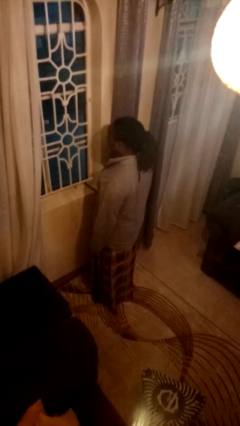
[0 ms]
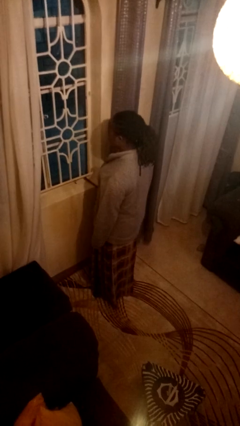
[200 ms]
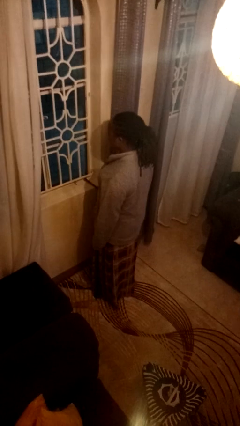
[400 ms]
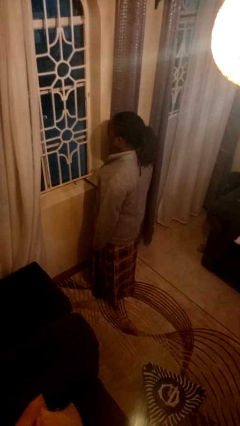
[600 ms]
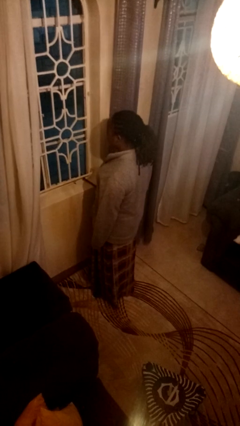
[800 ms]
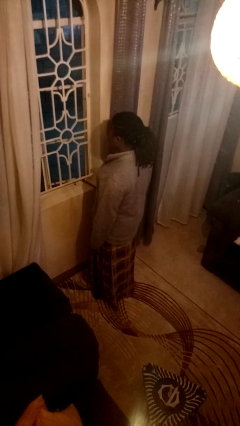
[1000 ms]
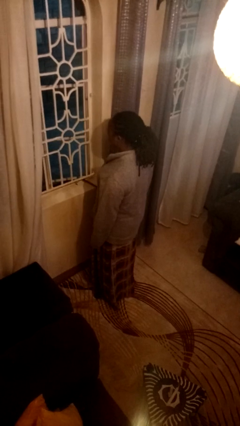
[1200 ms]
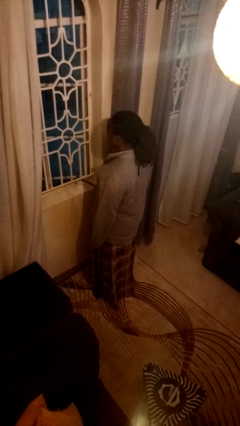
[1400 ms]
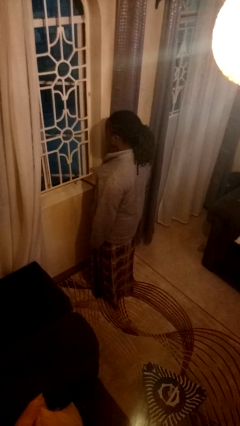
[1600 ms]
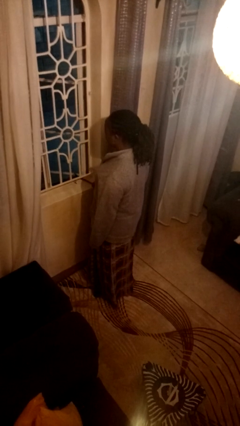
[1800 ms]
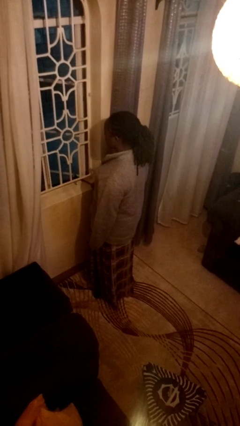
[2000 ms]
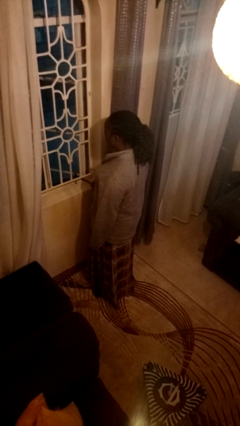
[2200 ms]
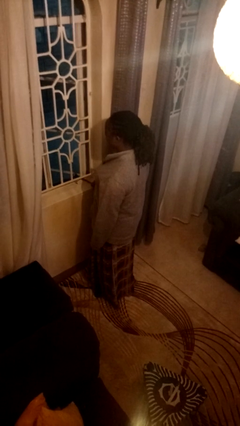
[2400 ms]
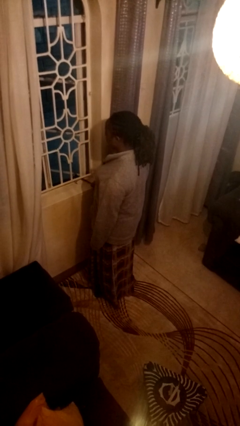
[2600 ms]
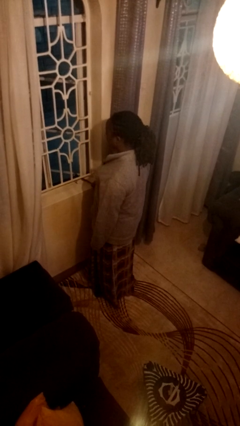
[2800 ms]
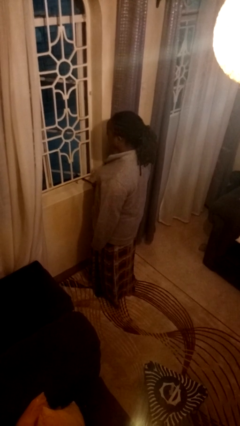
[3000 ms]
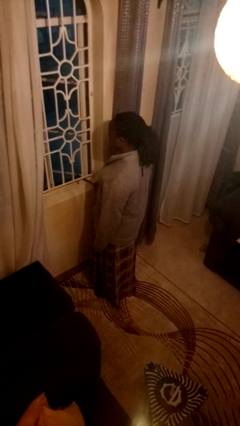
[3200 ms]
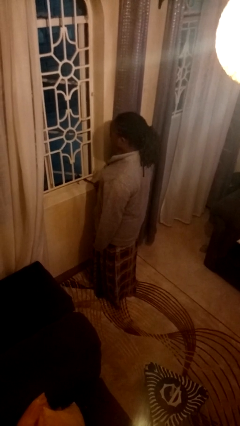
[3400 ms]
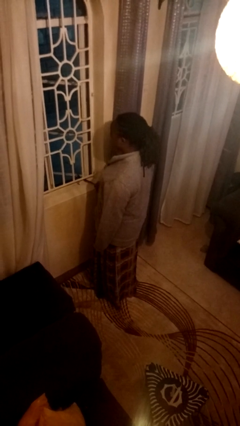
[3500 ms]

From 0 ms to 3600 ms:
person opens home window

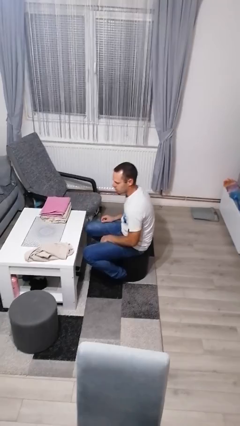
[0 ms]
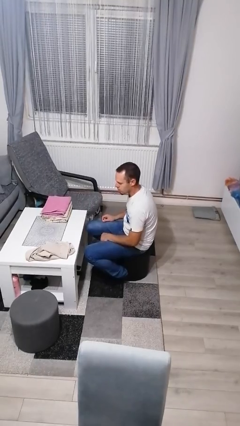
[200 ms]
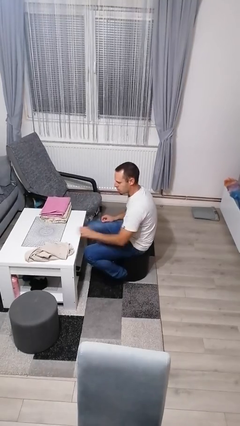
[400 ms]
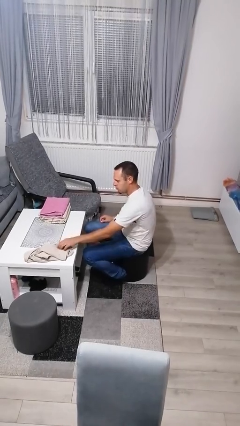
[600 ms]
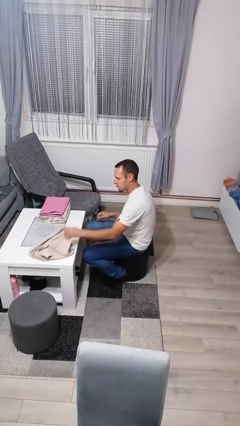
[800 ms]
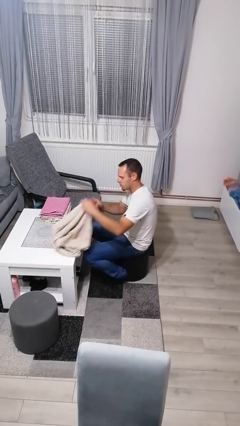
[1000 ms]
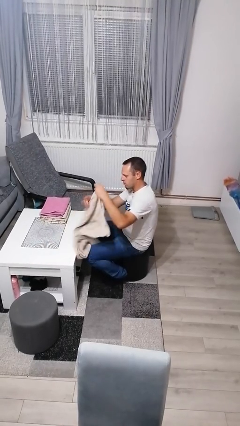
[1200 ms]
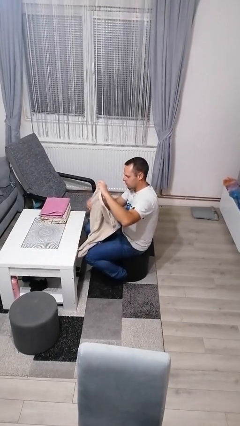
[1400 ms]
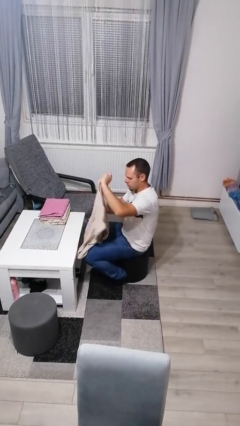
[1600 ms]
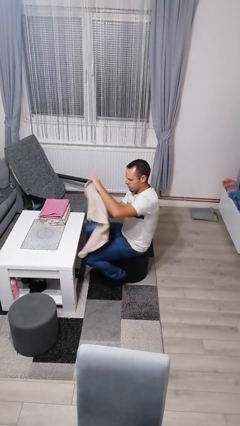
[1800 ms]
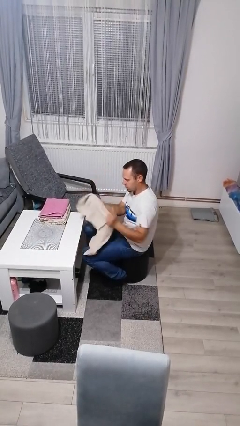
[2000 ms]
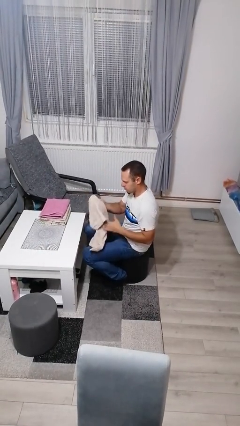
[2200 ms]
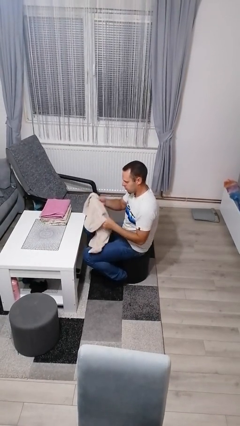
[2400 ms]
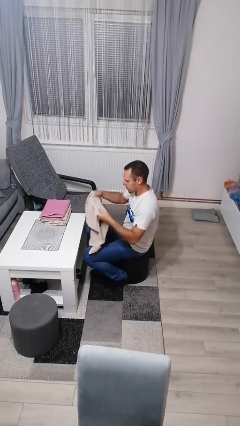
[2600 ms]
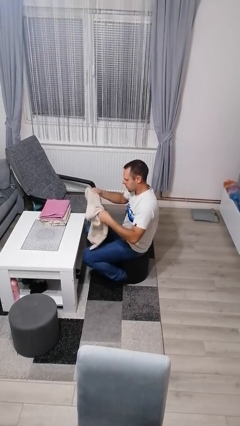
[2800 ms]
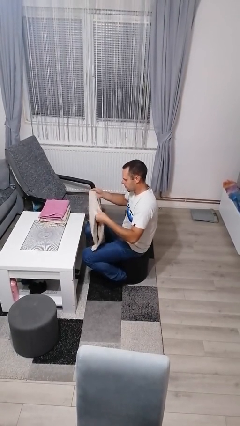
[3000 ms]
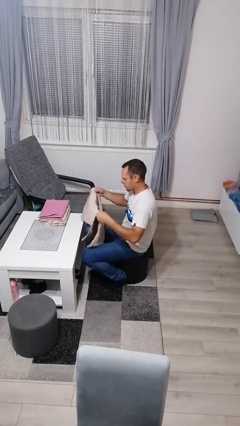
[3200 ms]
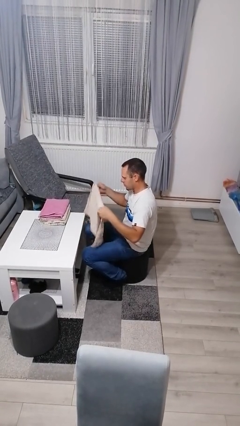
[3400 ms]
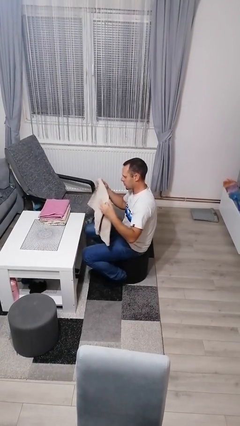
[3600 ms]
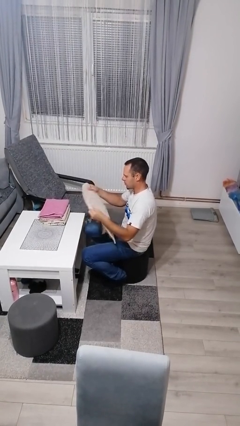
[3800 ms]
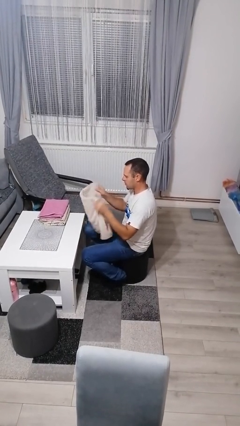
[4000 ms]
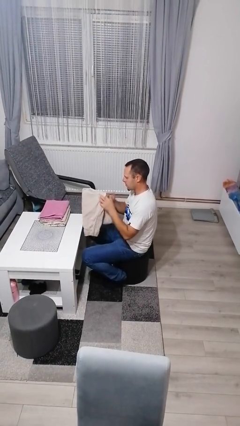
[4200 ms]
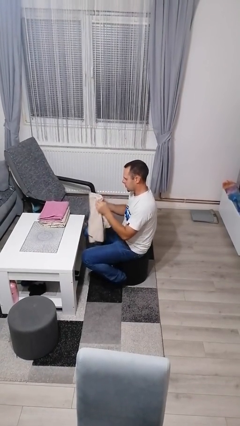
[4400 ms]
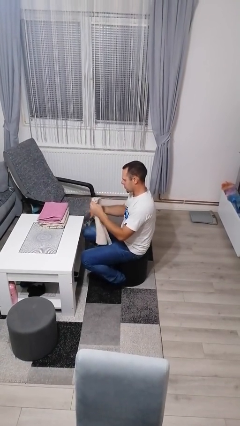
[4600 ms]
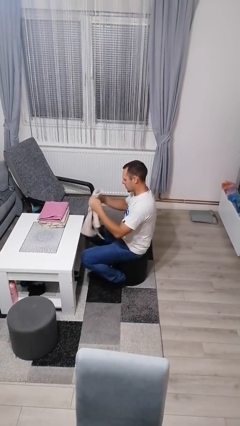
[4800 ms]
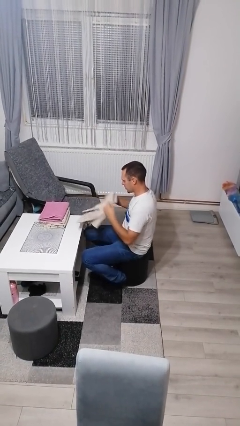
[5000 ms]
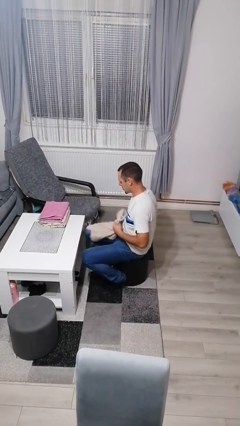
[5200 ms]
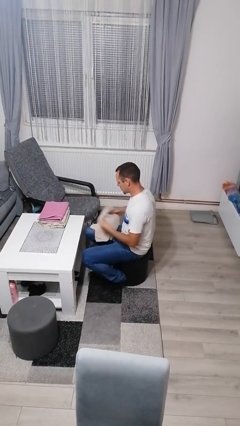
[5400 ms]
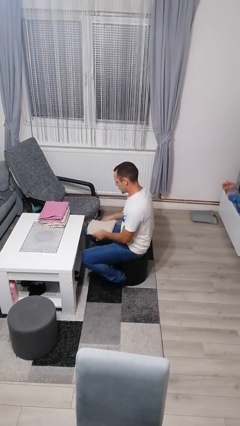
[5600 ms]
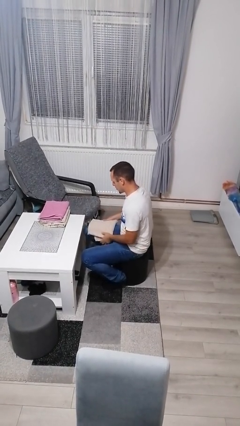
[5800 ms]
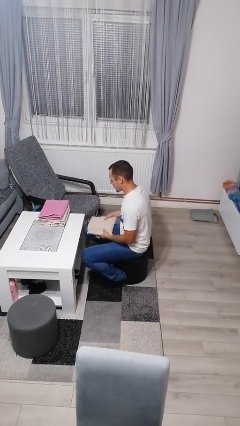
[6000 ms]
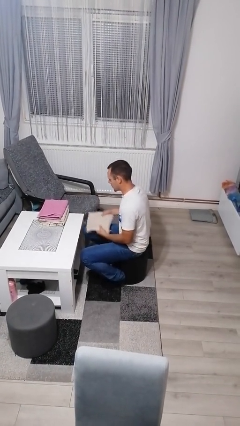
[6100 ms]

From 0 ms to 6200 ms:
person folds towel

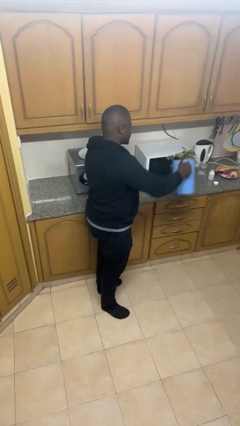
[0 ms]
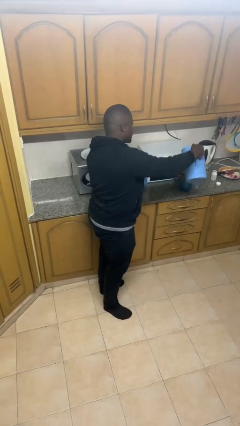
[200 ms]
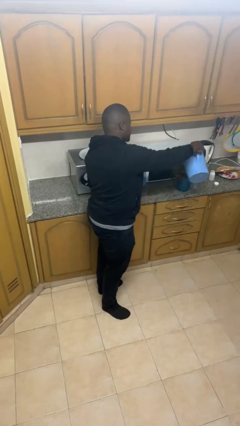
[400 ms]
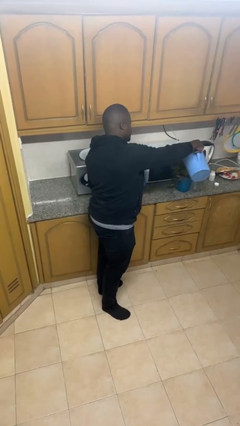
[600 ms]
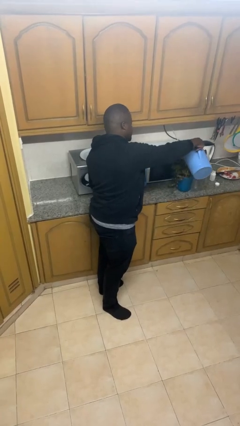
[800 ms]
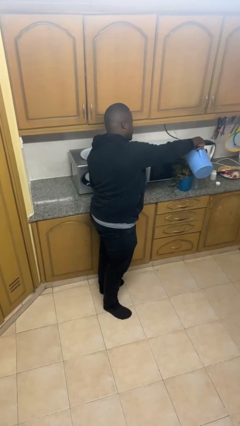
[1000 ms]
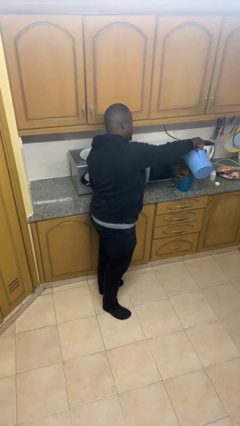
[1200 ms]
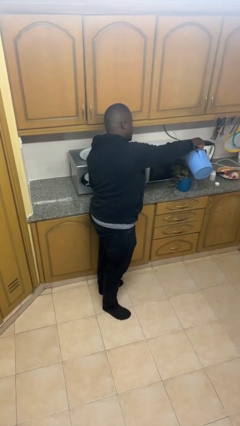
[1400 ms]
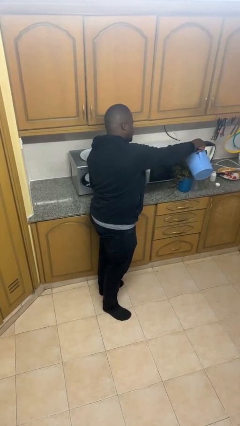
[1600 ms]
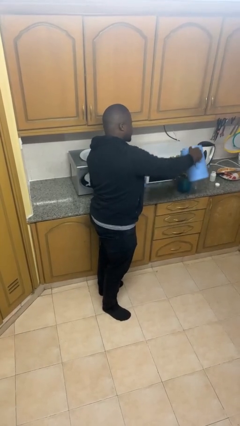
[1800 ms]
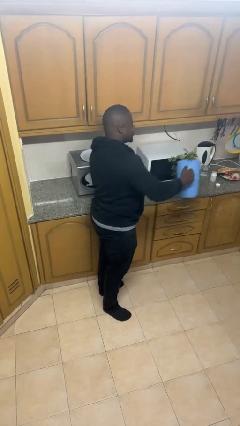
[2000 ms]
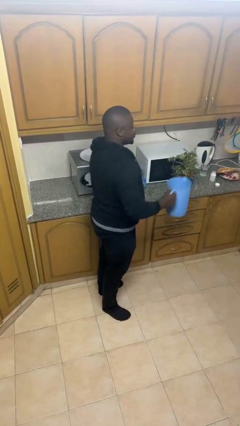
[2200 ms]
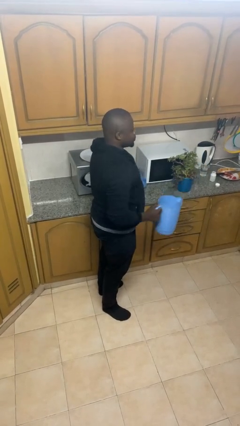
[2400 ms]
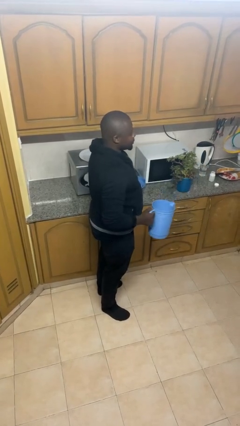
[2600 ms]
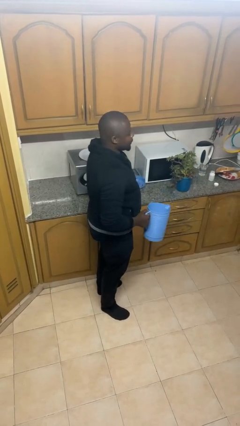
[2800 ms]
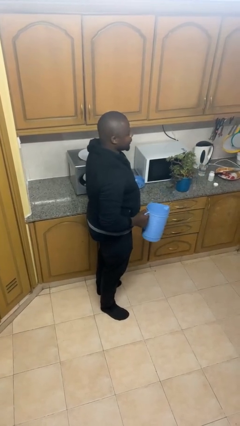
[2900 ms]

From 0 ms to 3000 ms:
person waters houseplant

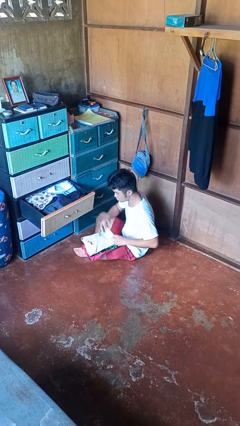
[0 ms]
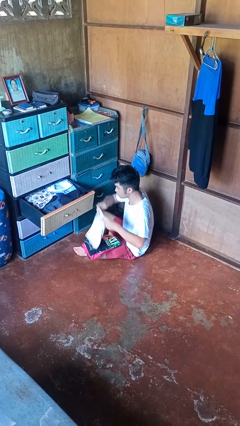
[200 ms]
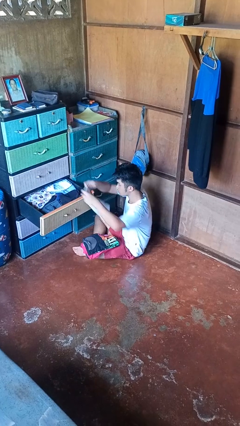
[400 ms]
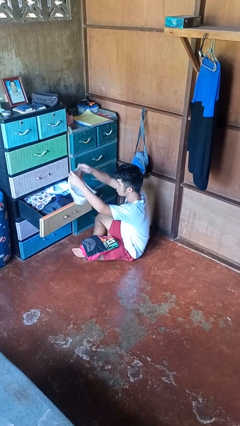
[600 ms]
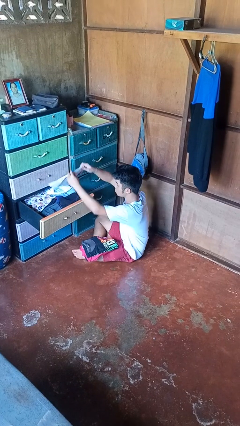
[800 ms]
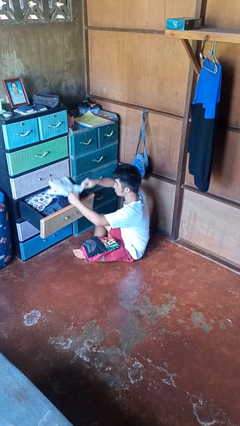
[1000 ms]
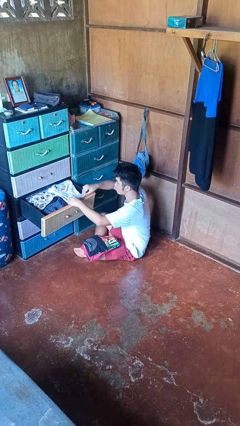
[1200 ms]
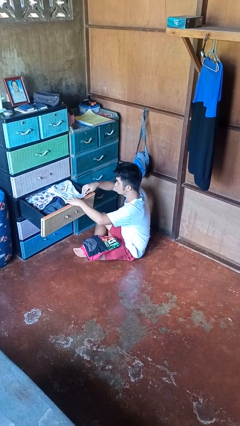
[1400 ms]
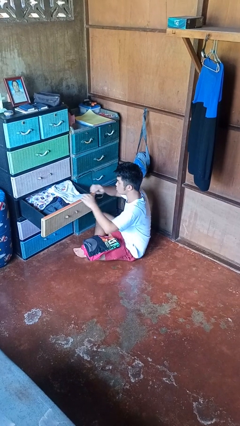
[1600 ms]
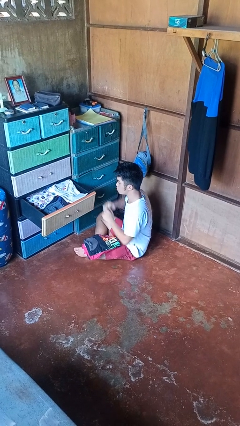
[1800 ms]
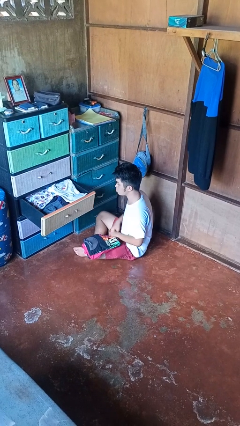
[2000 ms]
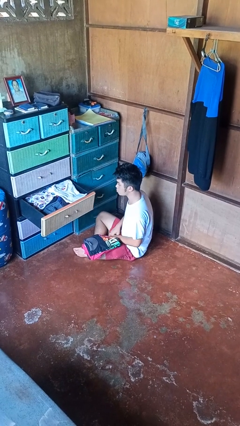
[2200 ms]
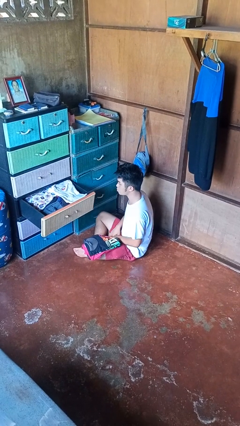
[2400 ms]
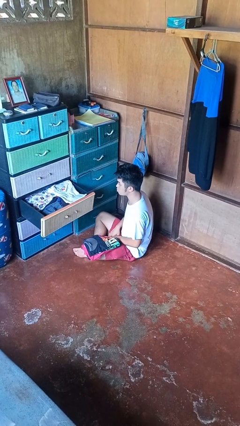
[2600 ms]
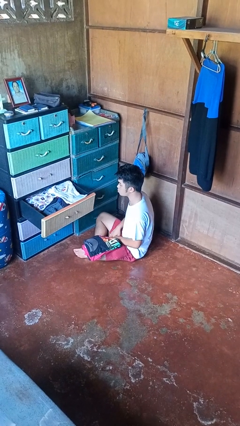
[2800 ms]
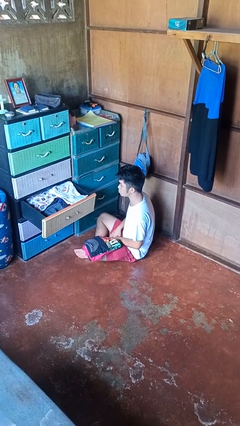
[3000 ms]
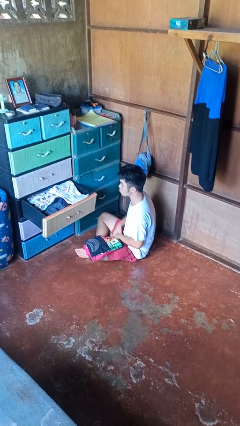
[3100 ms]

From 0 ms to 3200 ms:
person puts clothes into dresser

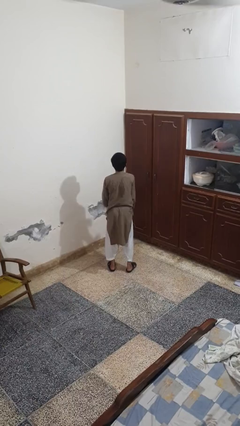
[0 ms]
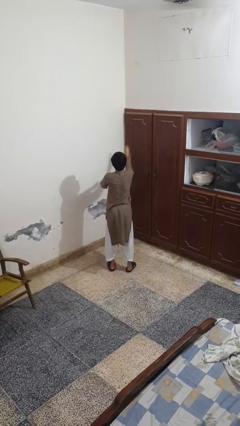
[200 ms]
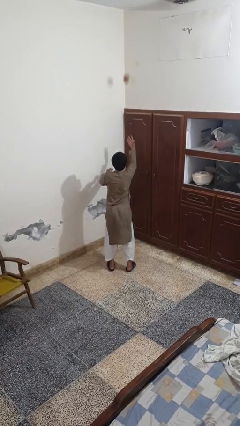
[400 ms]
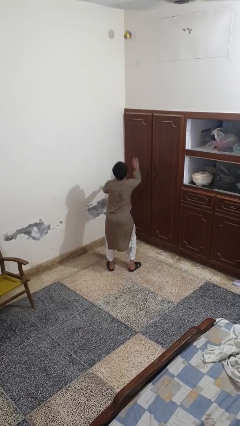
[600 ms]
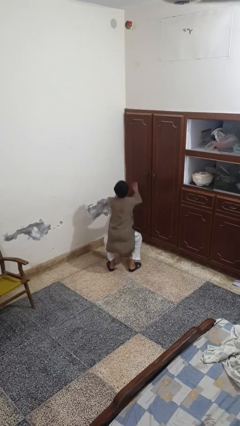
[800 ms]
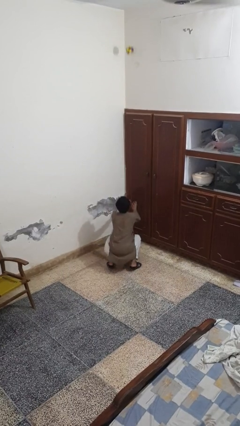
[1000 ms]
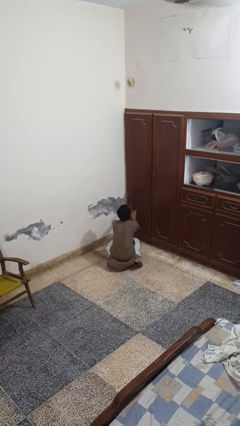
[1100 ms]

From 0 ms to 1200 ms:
person drops object

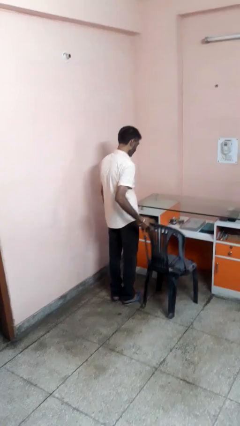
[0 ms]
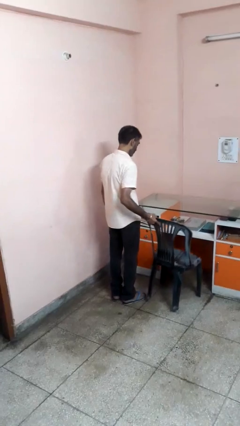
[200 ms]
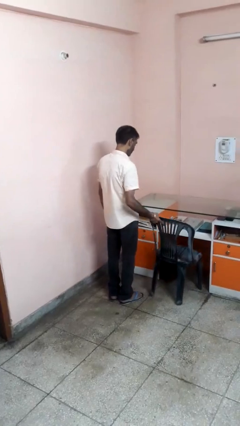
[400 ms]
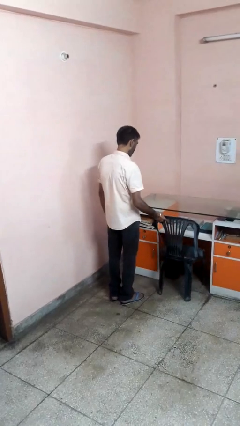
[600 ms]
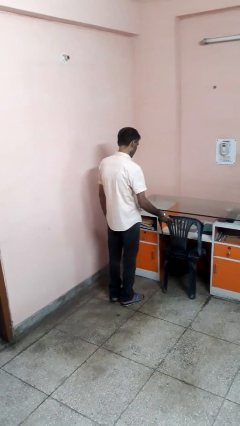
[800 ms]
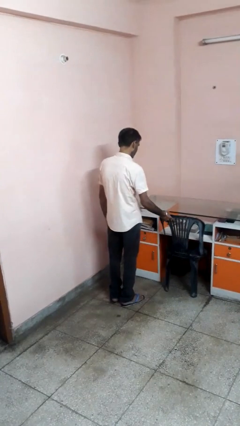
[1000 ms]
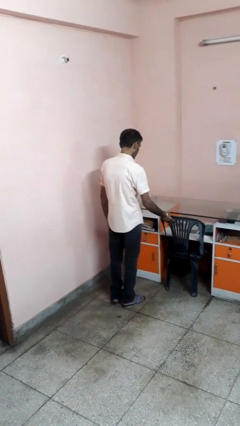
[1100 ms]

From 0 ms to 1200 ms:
person pushes in chair
